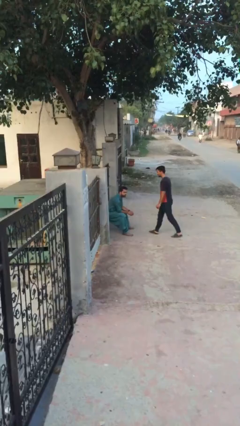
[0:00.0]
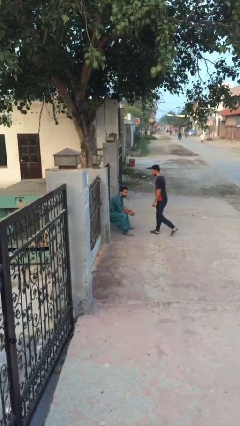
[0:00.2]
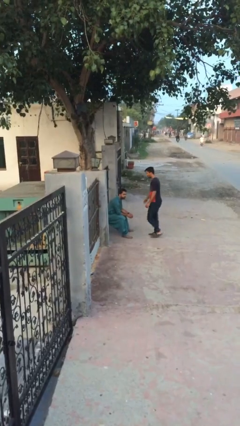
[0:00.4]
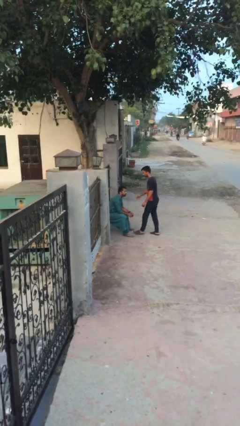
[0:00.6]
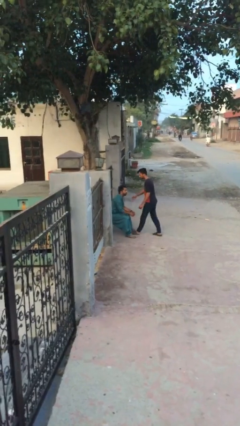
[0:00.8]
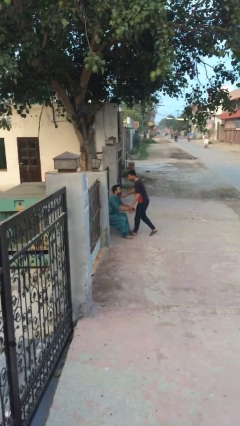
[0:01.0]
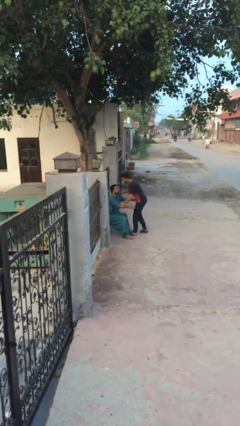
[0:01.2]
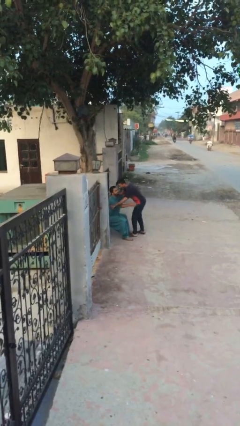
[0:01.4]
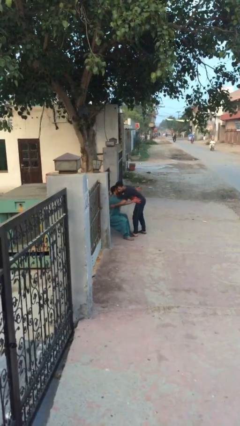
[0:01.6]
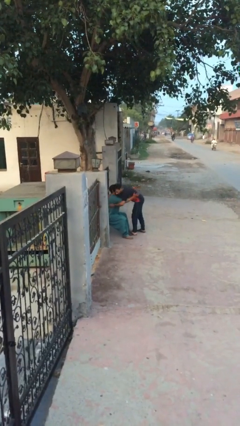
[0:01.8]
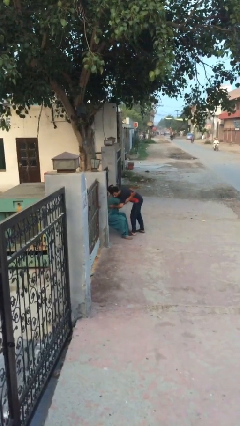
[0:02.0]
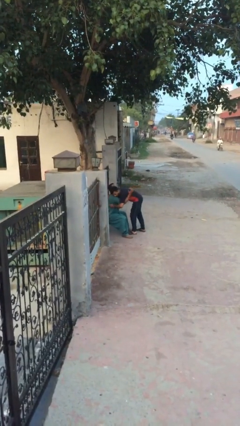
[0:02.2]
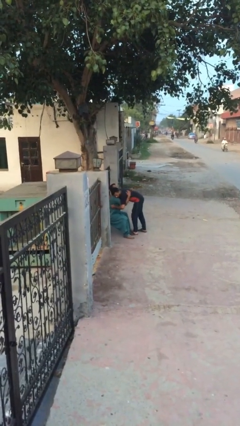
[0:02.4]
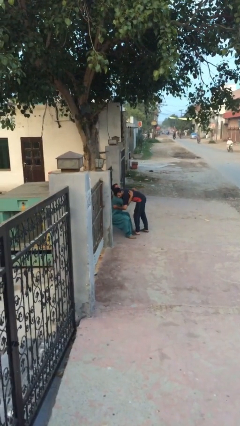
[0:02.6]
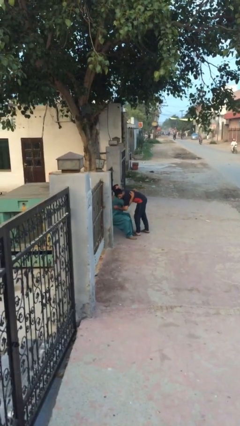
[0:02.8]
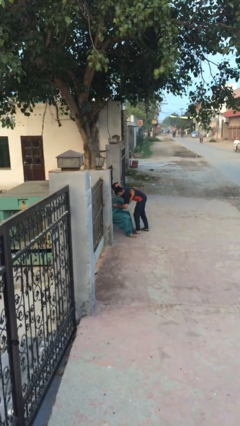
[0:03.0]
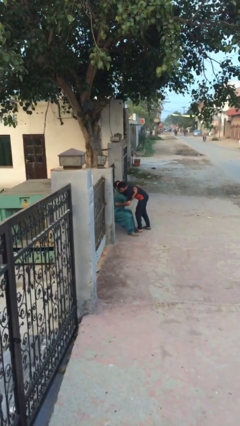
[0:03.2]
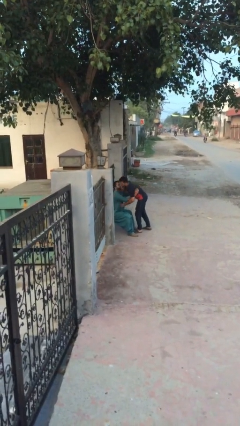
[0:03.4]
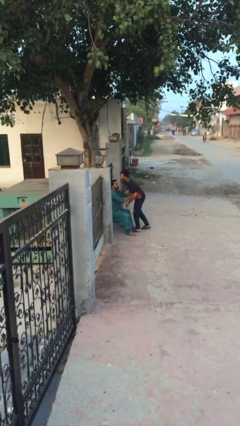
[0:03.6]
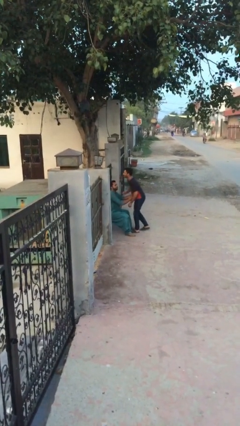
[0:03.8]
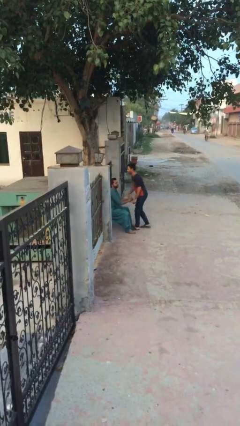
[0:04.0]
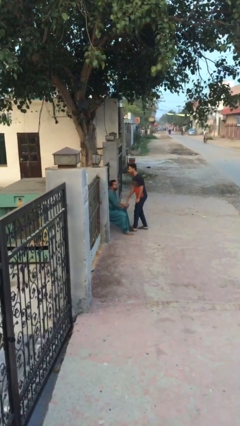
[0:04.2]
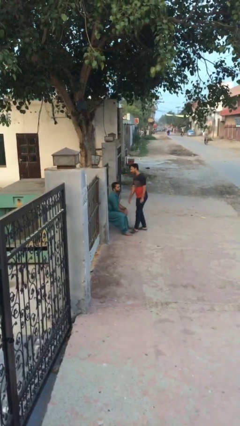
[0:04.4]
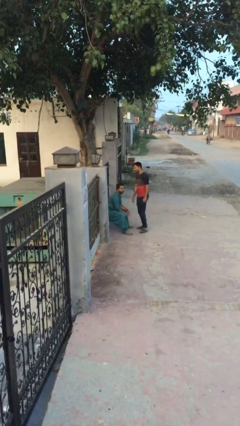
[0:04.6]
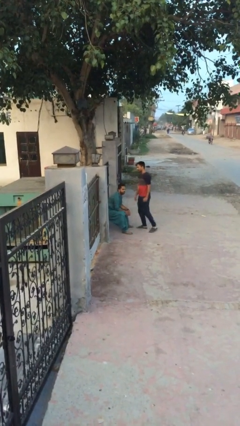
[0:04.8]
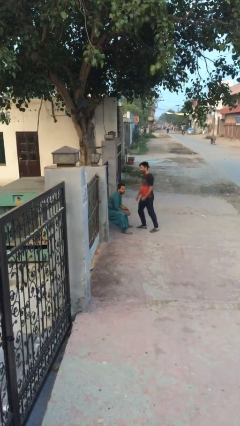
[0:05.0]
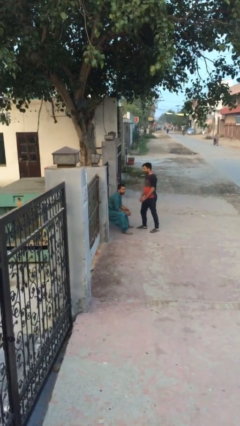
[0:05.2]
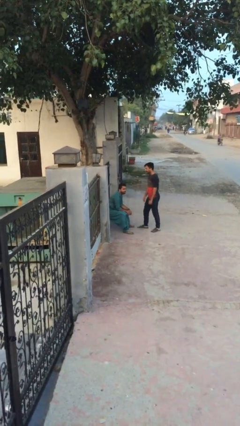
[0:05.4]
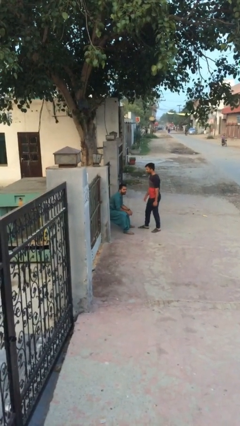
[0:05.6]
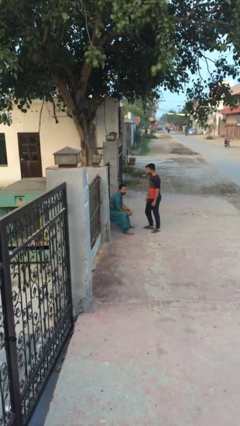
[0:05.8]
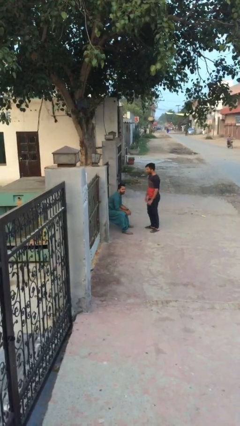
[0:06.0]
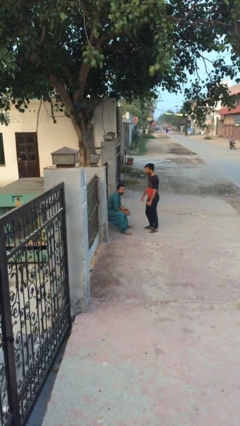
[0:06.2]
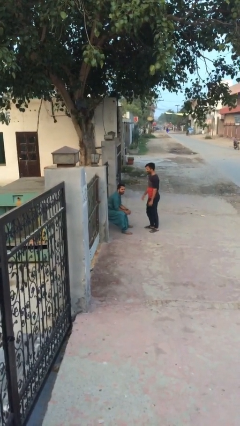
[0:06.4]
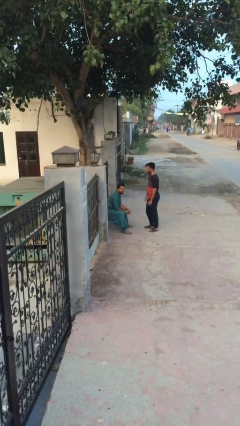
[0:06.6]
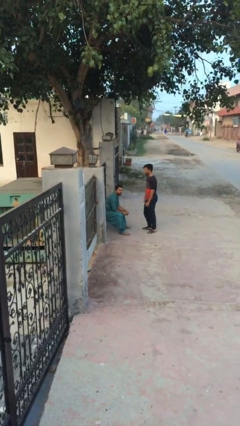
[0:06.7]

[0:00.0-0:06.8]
person embraces person

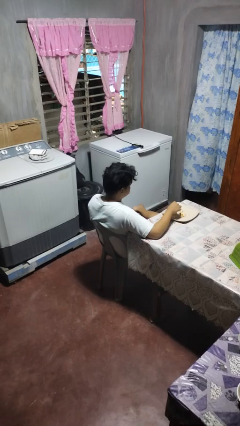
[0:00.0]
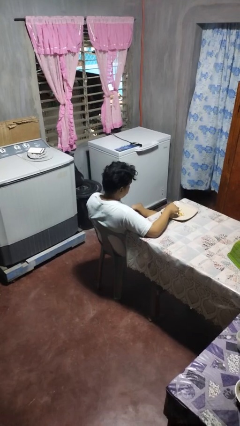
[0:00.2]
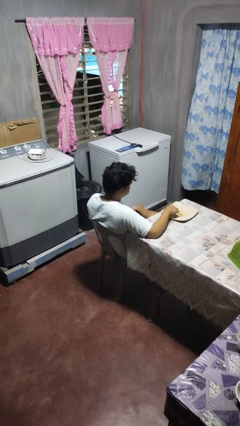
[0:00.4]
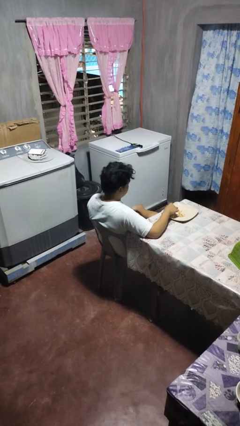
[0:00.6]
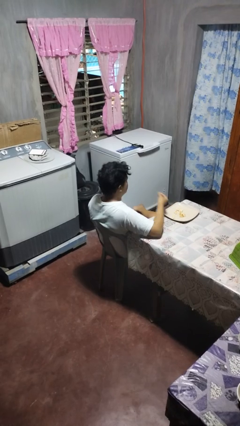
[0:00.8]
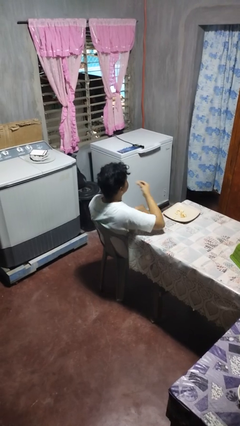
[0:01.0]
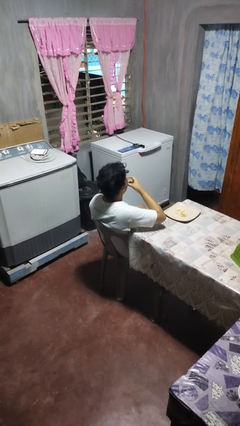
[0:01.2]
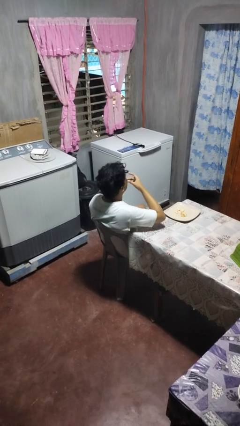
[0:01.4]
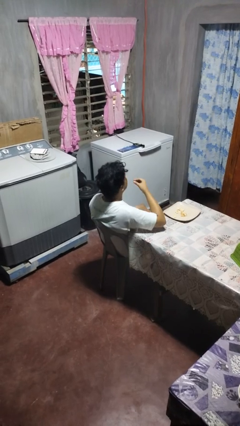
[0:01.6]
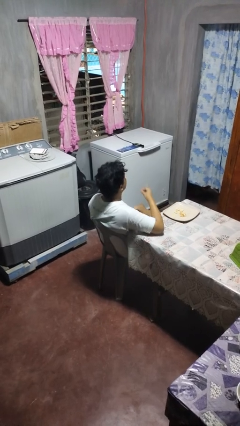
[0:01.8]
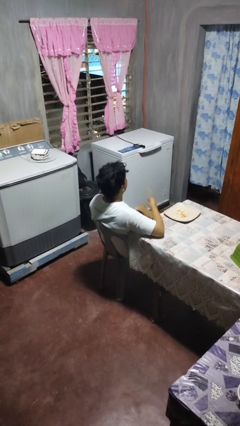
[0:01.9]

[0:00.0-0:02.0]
person eats with hands

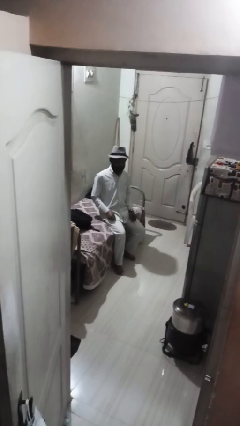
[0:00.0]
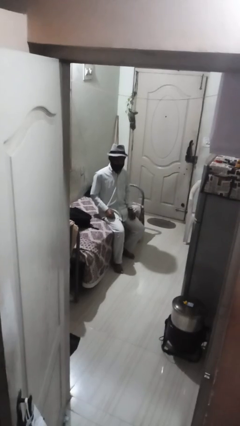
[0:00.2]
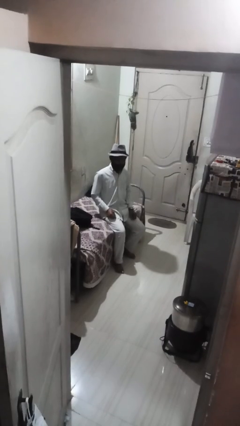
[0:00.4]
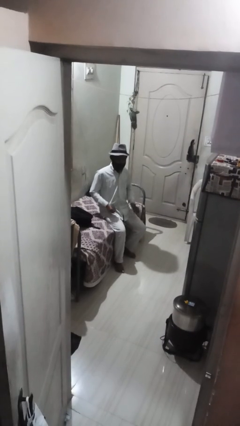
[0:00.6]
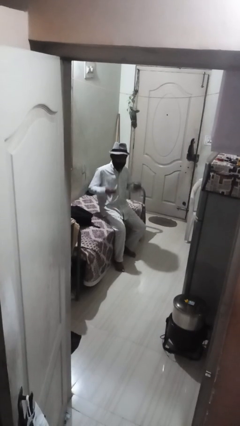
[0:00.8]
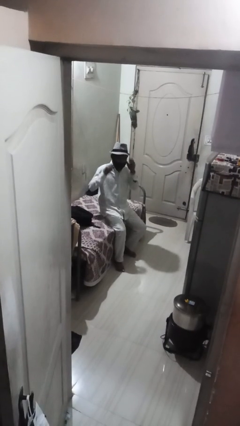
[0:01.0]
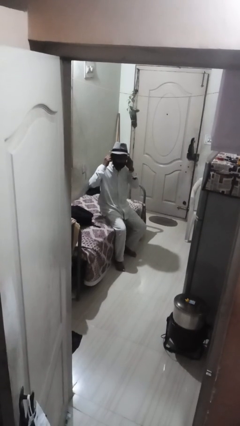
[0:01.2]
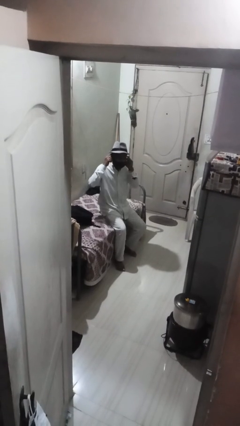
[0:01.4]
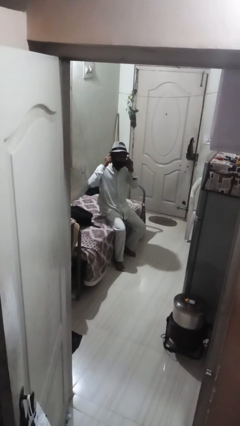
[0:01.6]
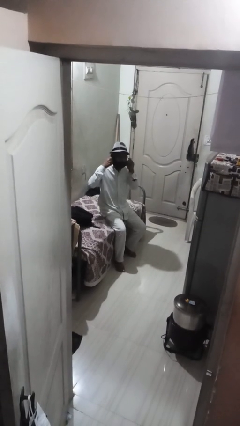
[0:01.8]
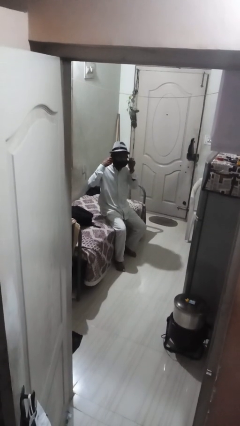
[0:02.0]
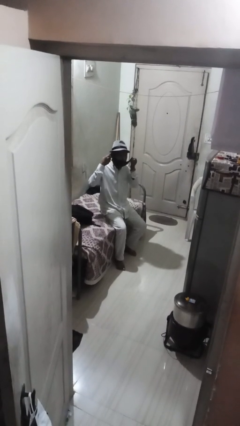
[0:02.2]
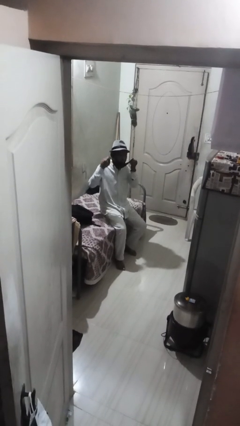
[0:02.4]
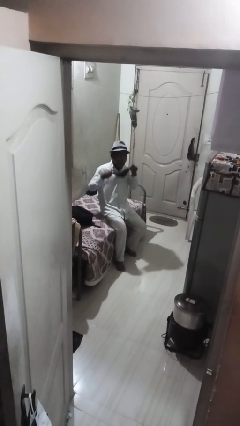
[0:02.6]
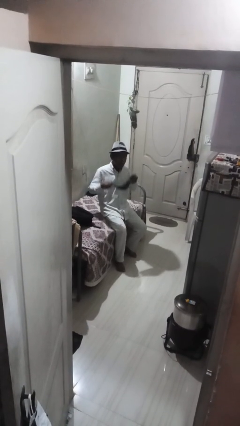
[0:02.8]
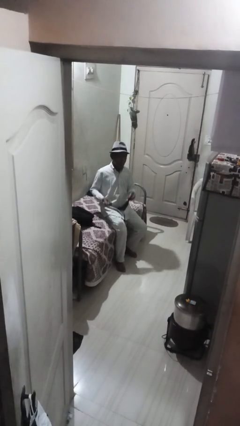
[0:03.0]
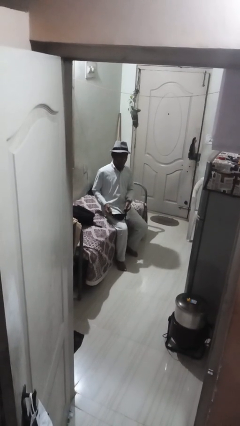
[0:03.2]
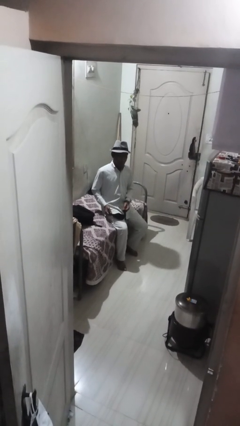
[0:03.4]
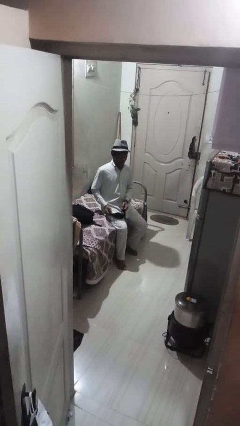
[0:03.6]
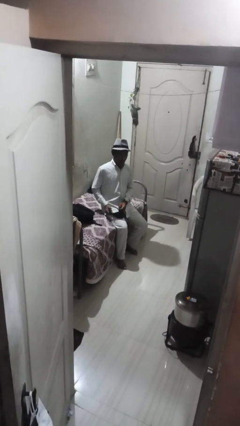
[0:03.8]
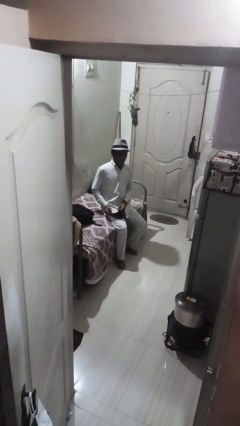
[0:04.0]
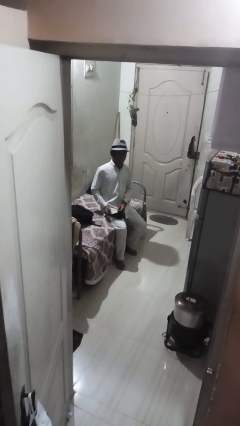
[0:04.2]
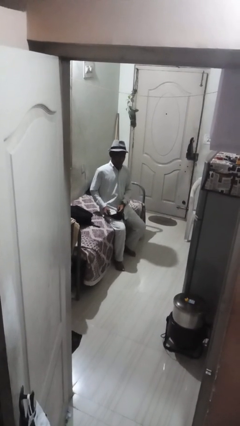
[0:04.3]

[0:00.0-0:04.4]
person takes off facemask

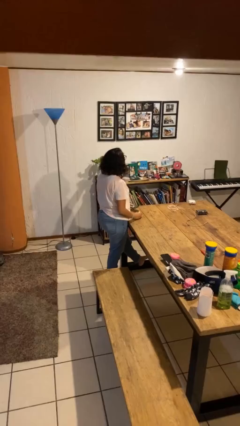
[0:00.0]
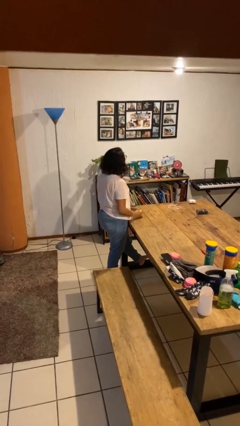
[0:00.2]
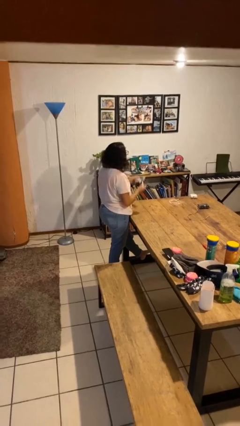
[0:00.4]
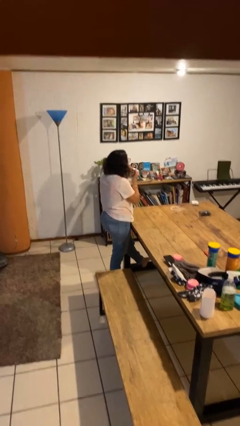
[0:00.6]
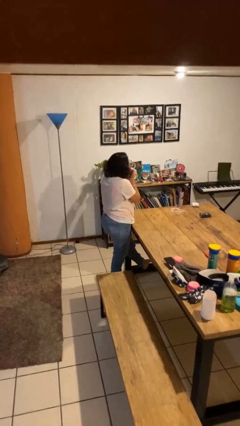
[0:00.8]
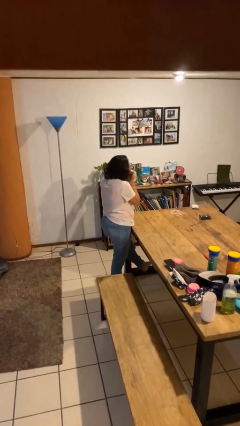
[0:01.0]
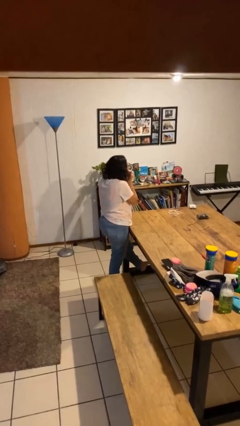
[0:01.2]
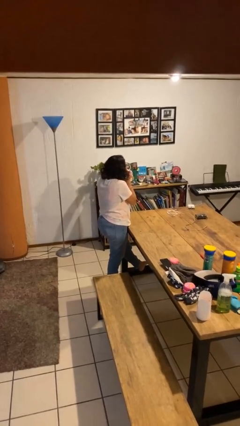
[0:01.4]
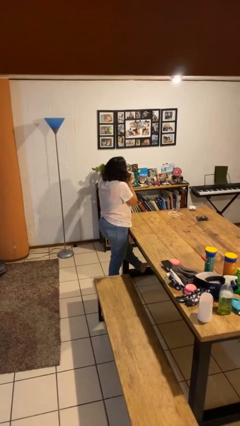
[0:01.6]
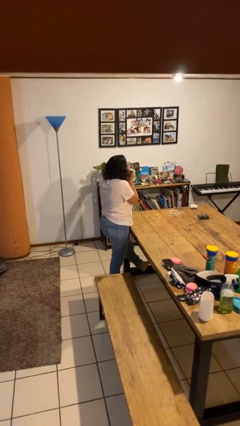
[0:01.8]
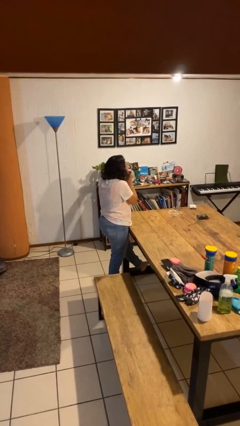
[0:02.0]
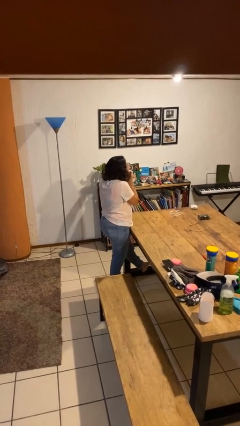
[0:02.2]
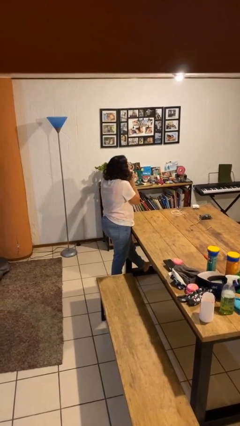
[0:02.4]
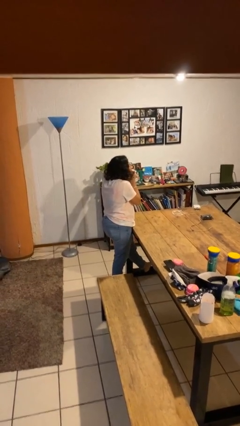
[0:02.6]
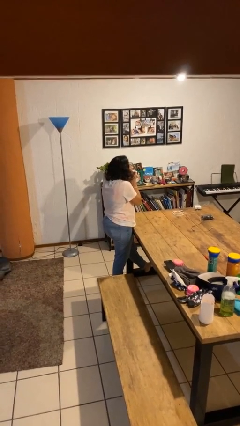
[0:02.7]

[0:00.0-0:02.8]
person applies lip makeup

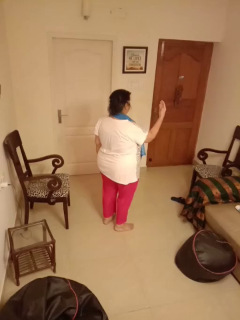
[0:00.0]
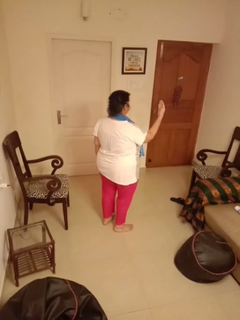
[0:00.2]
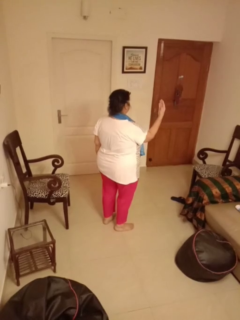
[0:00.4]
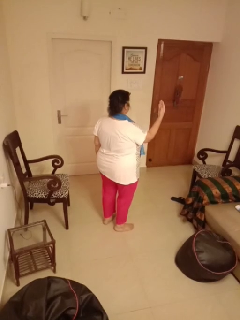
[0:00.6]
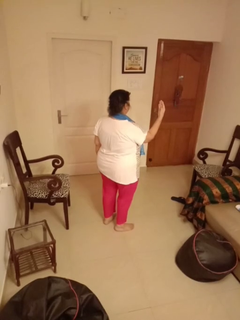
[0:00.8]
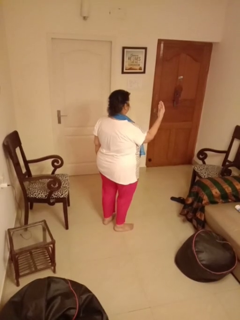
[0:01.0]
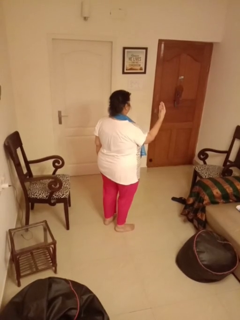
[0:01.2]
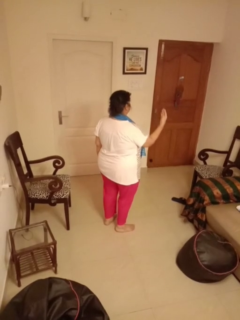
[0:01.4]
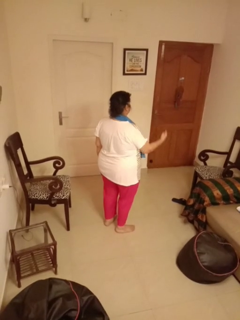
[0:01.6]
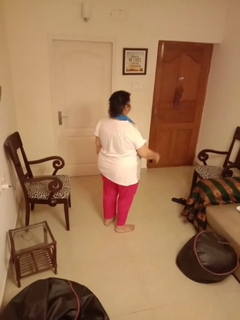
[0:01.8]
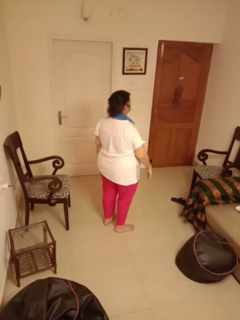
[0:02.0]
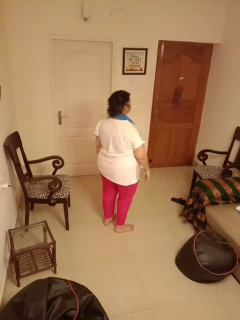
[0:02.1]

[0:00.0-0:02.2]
person gestures number four
